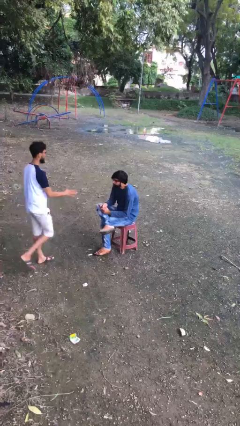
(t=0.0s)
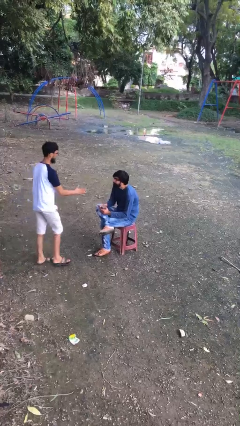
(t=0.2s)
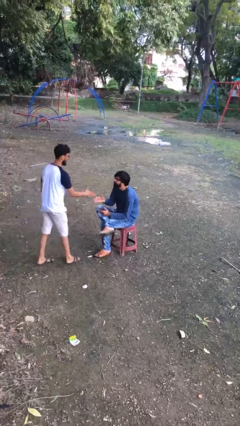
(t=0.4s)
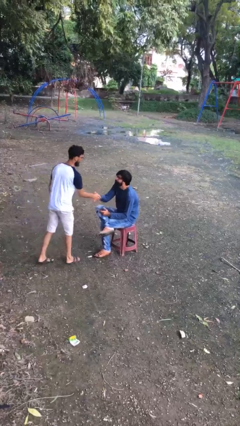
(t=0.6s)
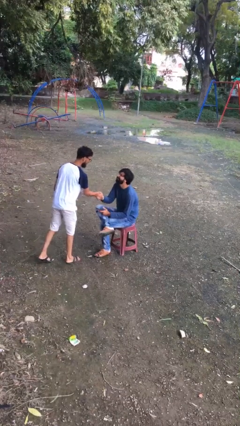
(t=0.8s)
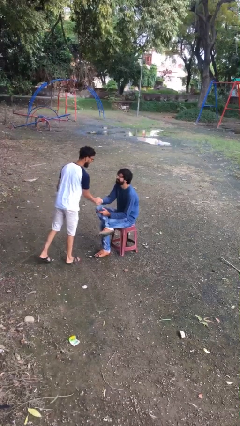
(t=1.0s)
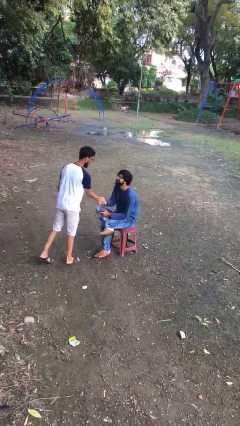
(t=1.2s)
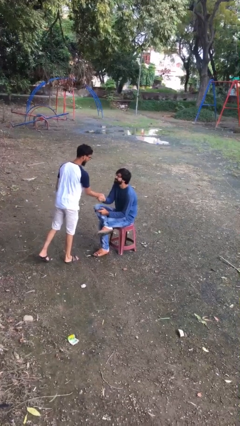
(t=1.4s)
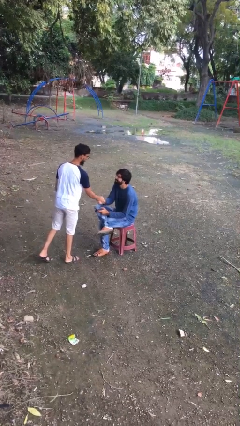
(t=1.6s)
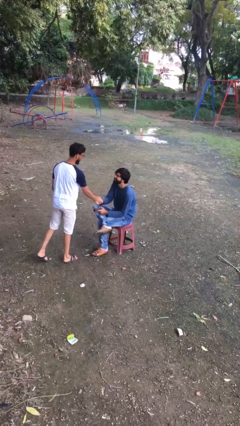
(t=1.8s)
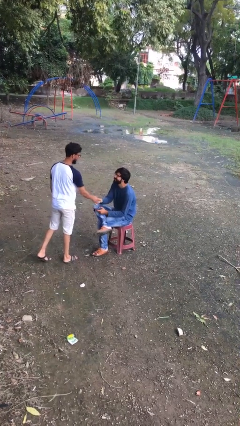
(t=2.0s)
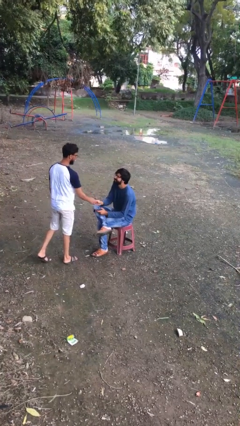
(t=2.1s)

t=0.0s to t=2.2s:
person shakes hand

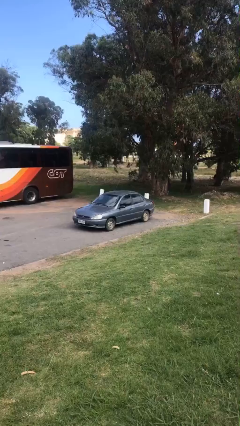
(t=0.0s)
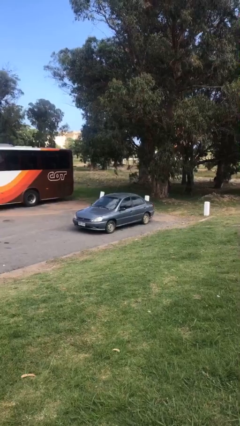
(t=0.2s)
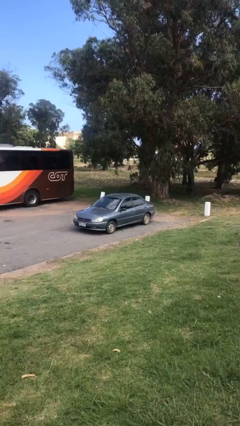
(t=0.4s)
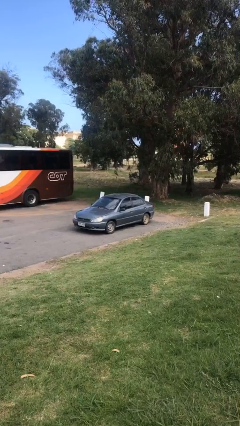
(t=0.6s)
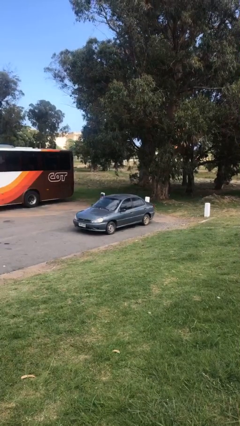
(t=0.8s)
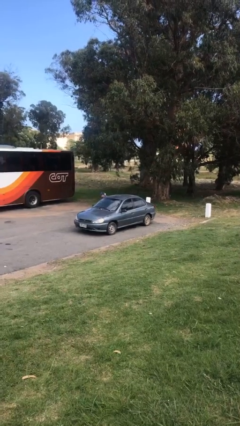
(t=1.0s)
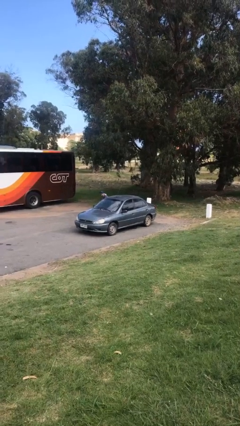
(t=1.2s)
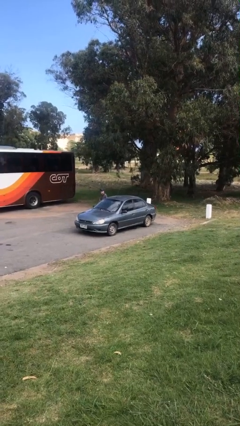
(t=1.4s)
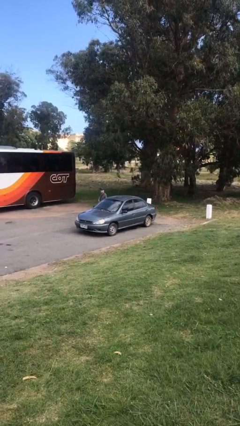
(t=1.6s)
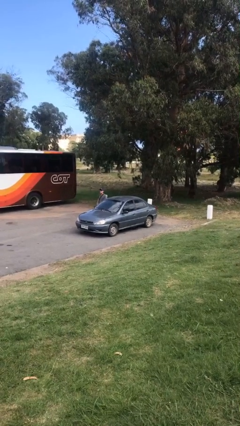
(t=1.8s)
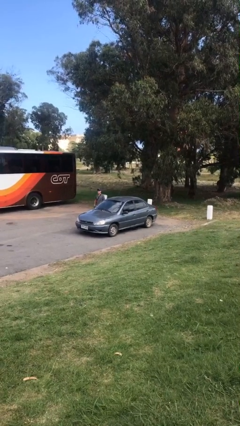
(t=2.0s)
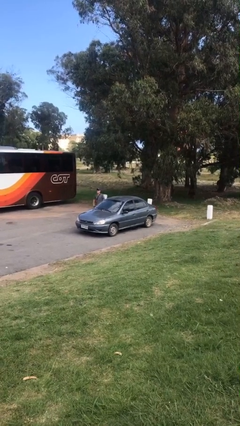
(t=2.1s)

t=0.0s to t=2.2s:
car drops off person

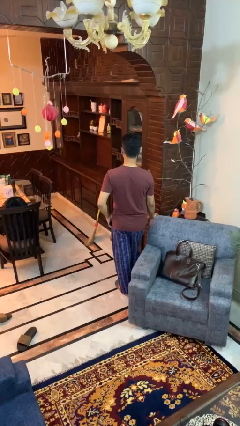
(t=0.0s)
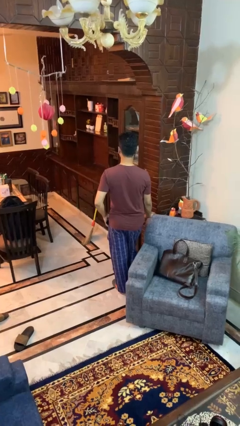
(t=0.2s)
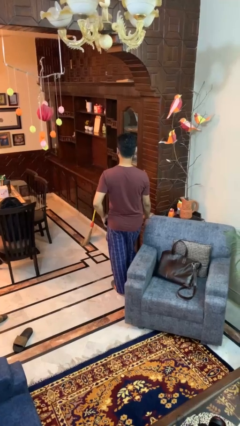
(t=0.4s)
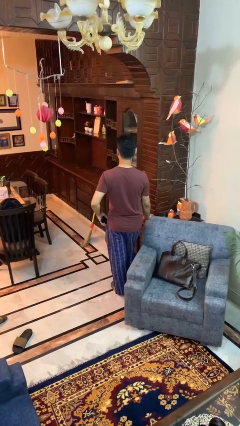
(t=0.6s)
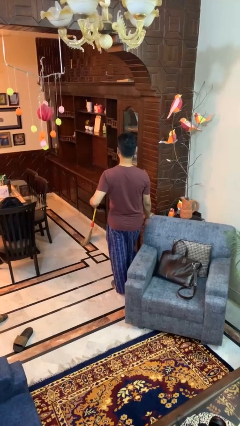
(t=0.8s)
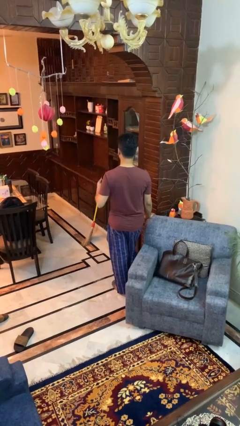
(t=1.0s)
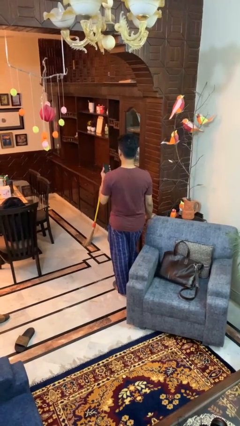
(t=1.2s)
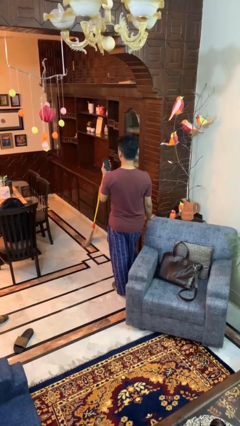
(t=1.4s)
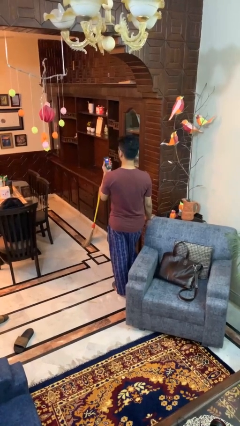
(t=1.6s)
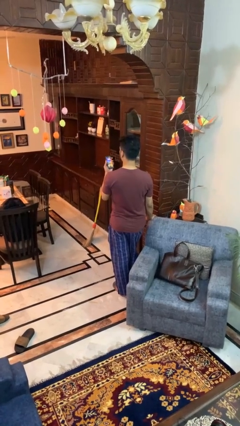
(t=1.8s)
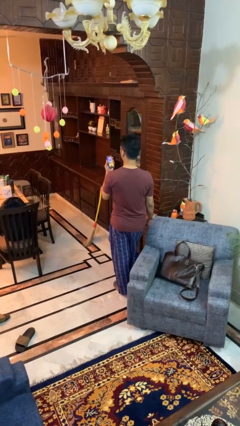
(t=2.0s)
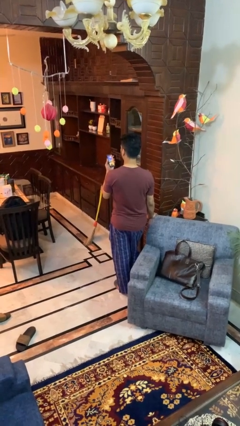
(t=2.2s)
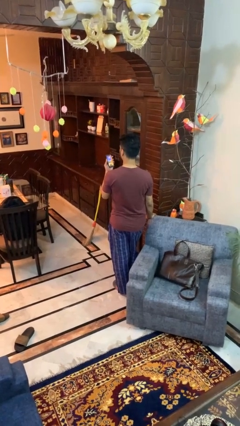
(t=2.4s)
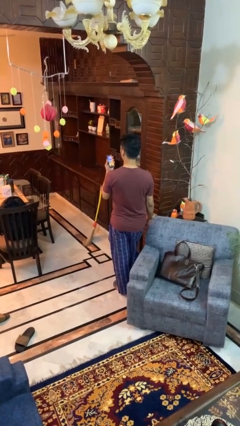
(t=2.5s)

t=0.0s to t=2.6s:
person takes phone from pocket

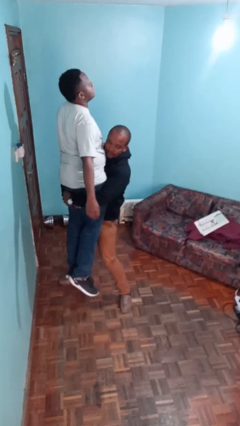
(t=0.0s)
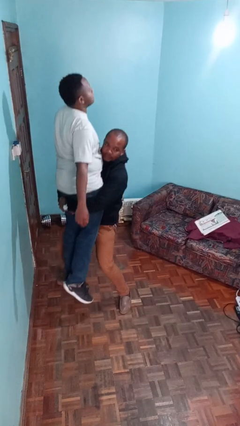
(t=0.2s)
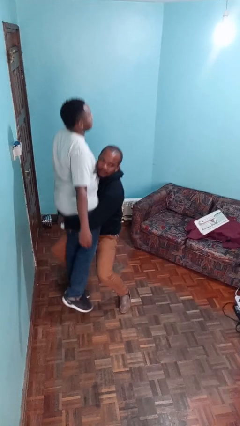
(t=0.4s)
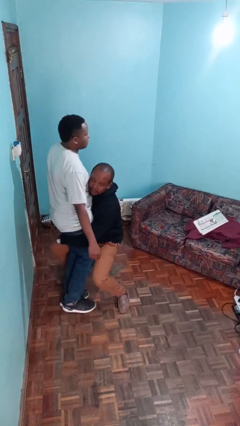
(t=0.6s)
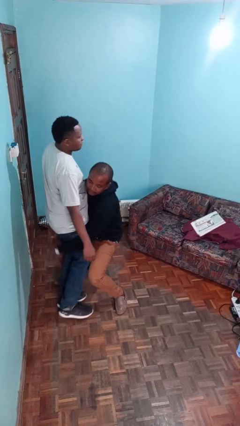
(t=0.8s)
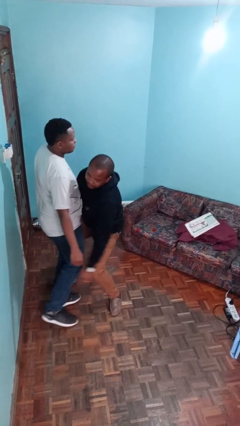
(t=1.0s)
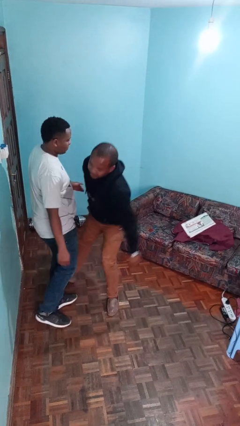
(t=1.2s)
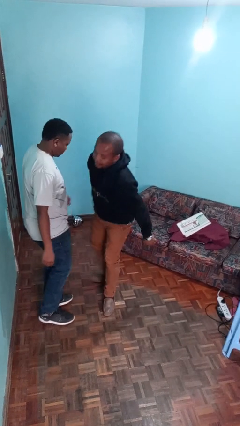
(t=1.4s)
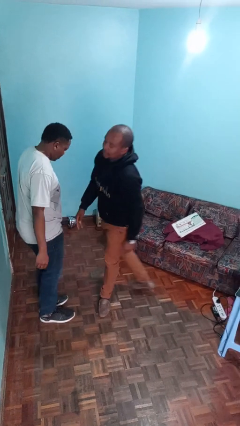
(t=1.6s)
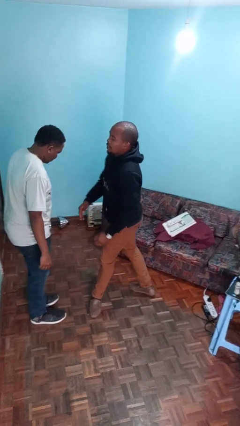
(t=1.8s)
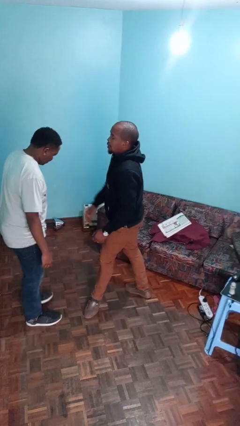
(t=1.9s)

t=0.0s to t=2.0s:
person puts down person

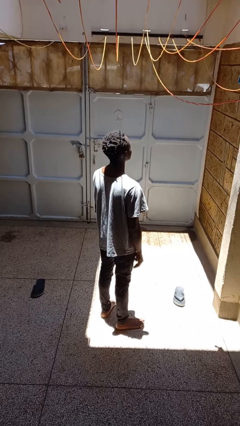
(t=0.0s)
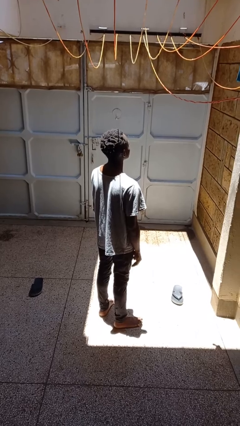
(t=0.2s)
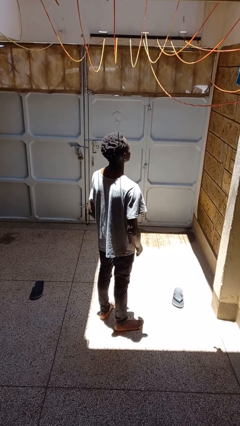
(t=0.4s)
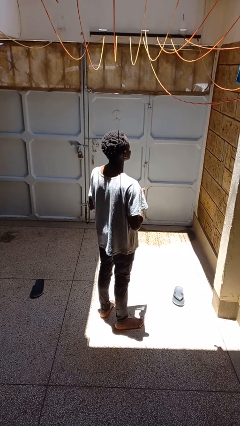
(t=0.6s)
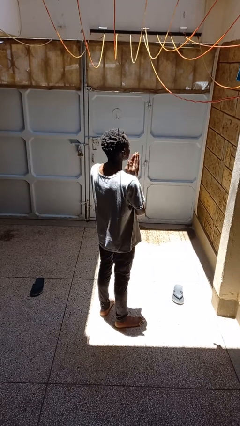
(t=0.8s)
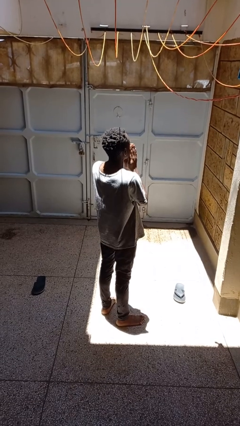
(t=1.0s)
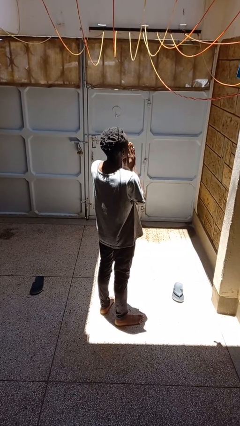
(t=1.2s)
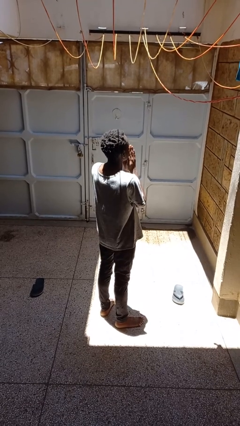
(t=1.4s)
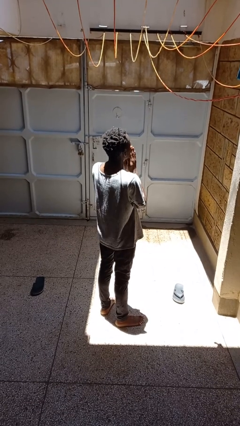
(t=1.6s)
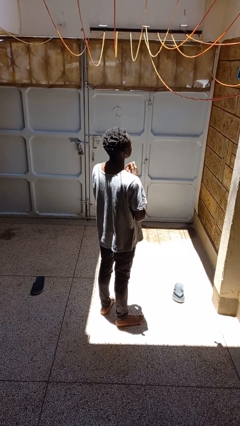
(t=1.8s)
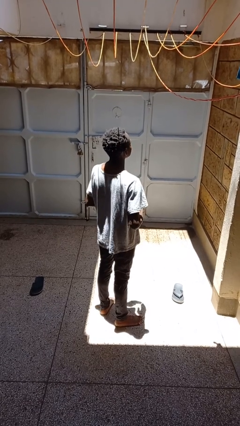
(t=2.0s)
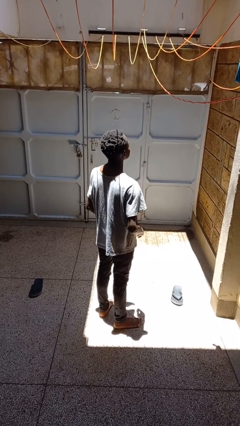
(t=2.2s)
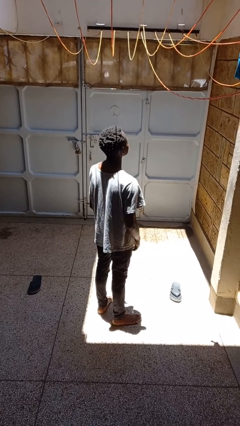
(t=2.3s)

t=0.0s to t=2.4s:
person prays

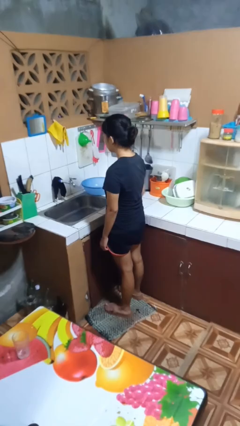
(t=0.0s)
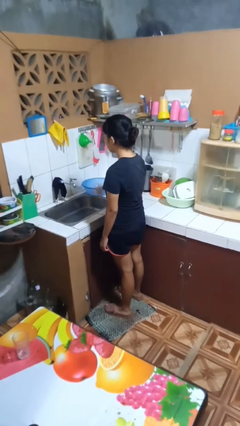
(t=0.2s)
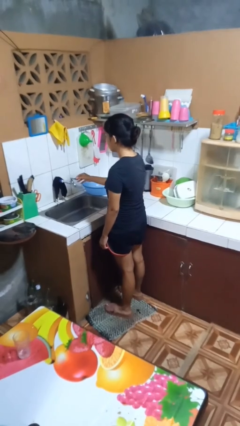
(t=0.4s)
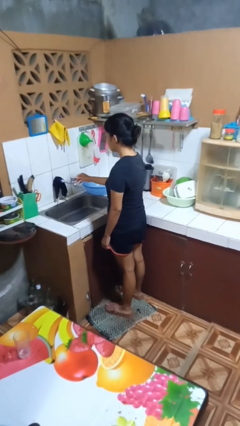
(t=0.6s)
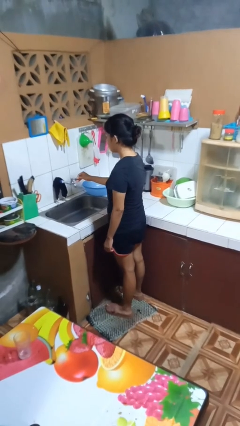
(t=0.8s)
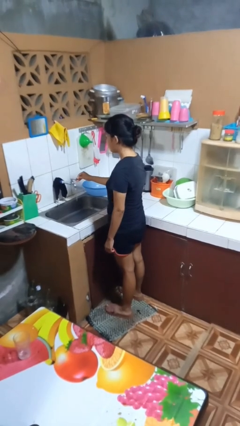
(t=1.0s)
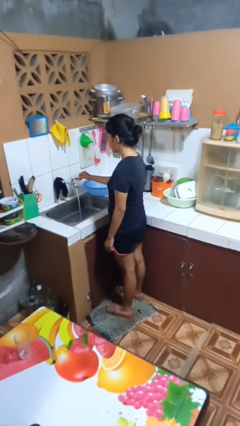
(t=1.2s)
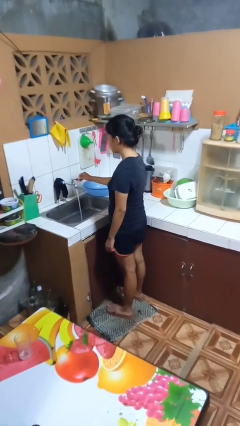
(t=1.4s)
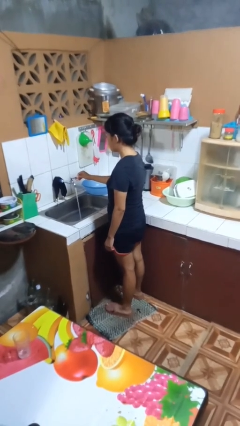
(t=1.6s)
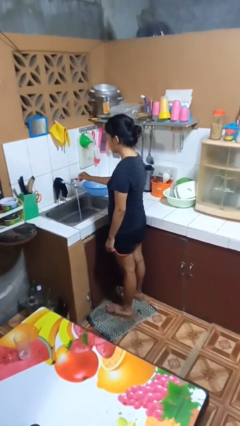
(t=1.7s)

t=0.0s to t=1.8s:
person turns on faucet

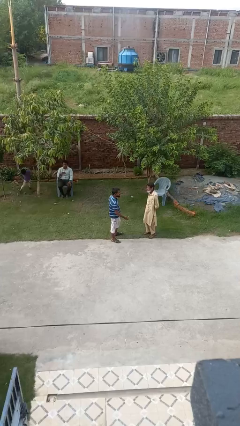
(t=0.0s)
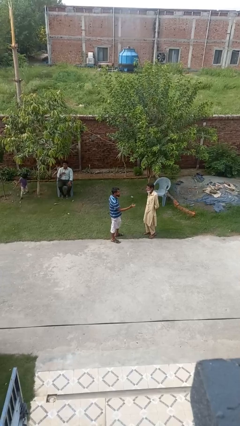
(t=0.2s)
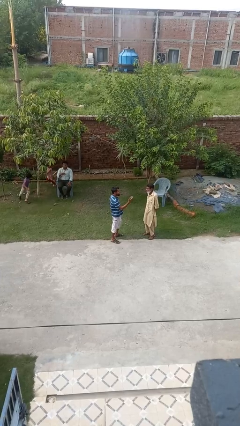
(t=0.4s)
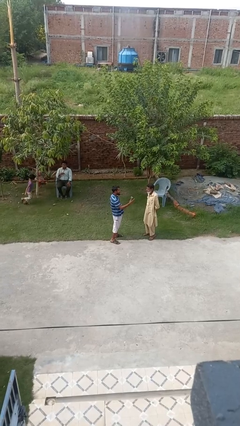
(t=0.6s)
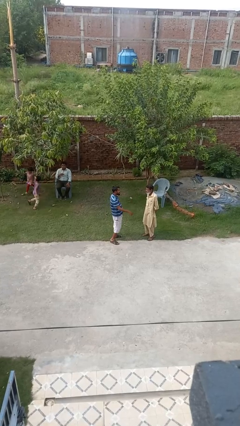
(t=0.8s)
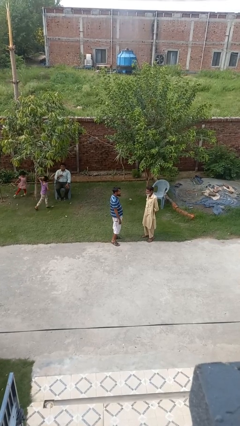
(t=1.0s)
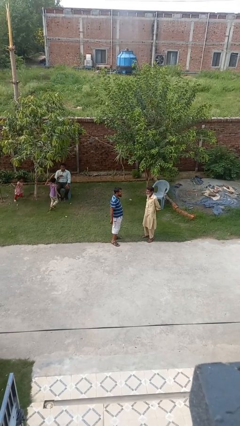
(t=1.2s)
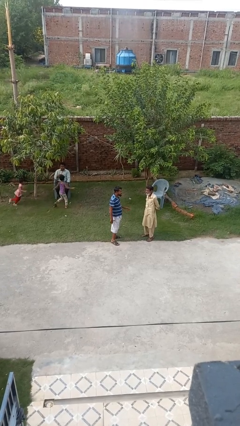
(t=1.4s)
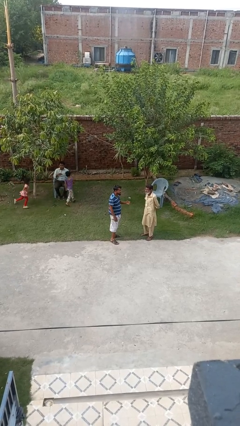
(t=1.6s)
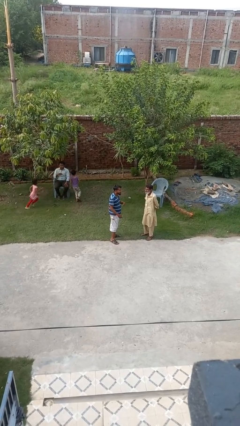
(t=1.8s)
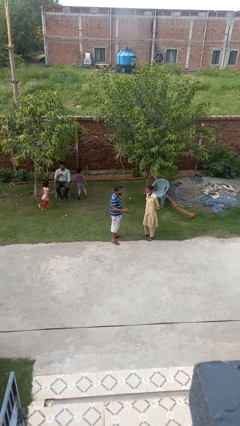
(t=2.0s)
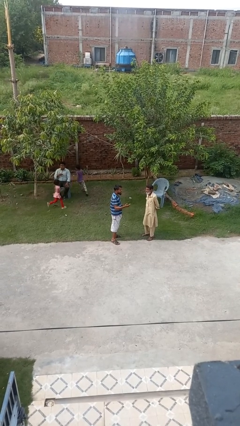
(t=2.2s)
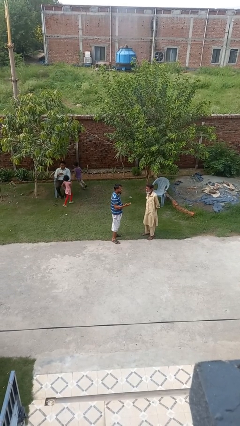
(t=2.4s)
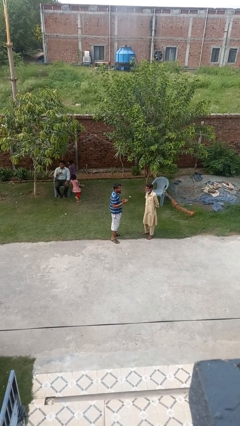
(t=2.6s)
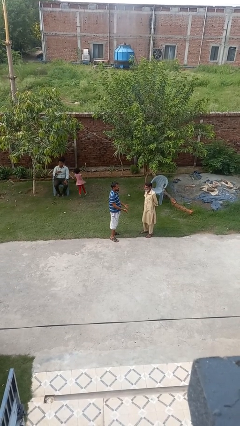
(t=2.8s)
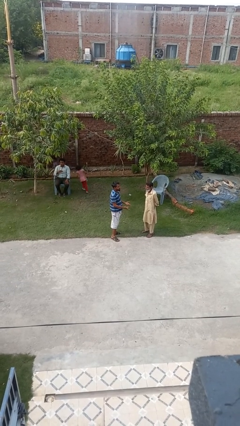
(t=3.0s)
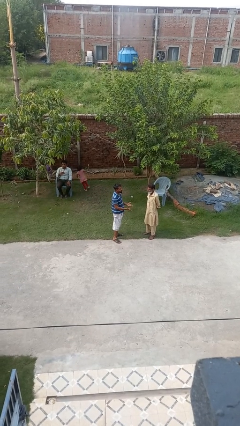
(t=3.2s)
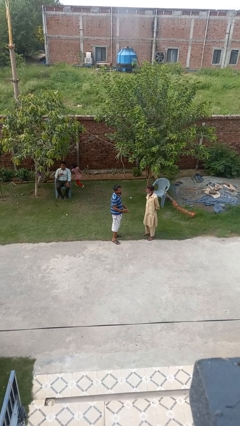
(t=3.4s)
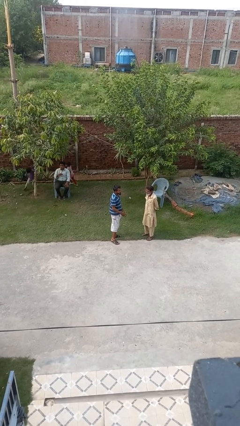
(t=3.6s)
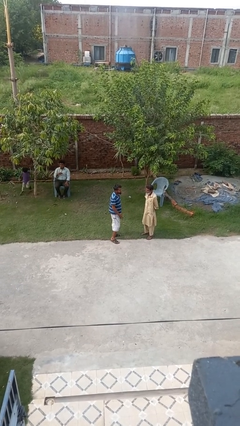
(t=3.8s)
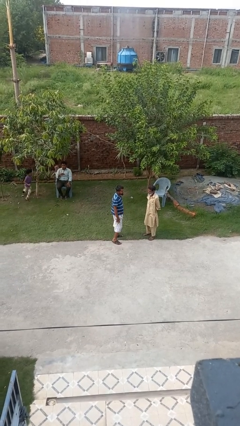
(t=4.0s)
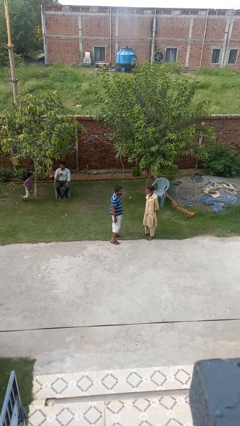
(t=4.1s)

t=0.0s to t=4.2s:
person talks to person
